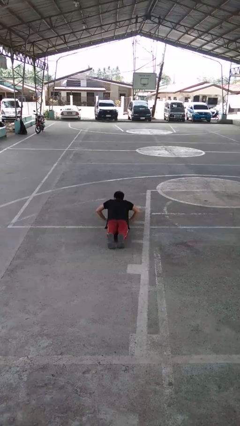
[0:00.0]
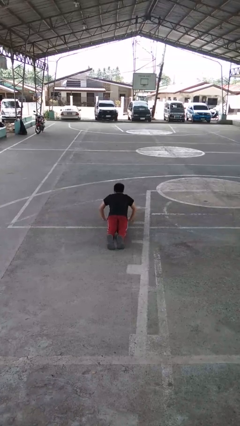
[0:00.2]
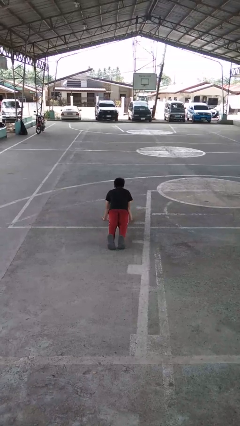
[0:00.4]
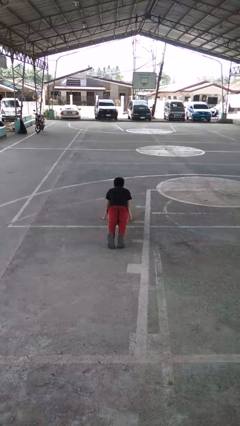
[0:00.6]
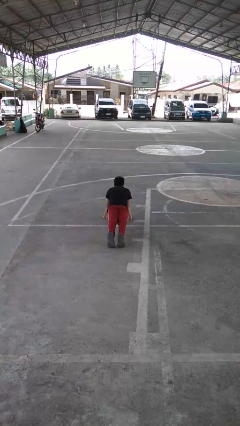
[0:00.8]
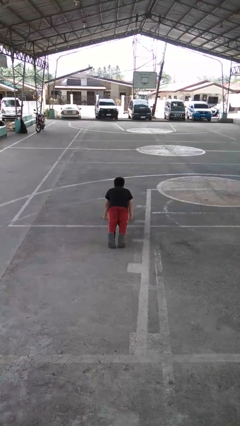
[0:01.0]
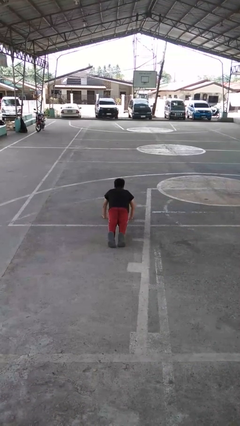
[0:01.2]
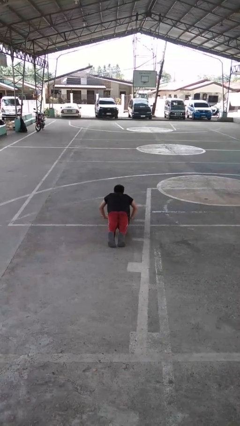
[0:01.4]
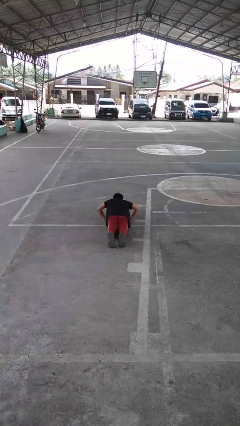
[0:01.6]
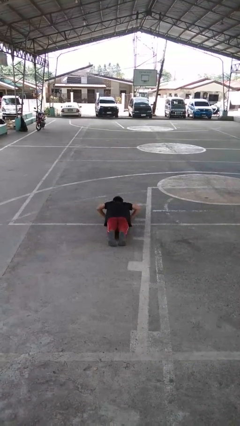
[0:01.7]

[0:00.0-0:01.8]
person exercises with pushup

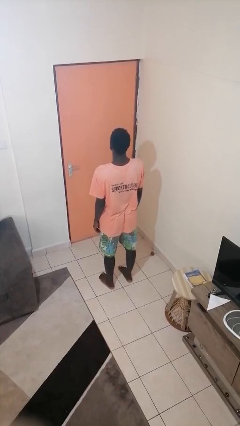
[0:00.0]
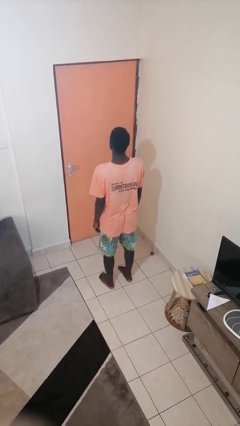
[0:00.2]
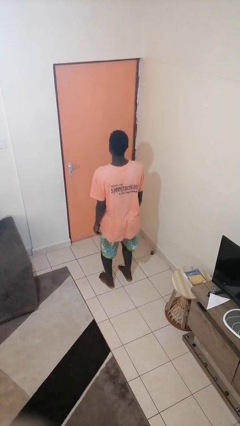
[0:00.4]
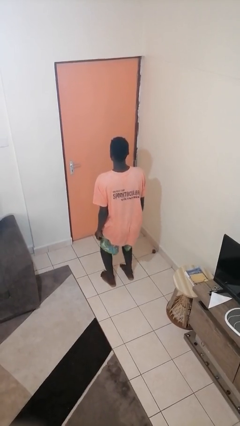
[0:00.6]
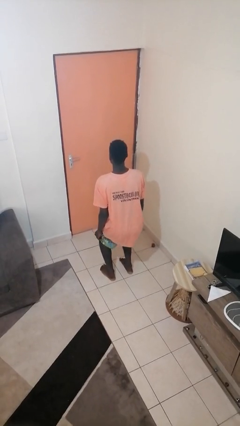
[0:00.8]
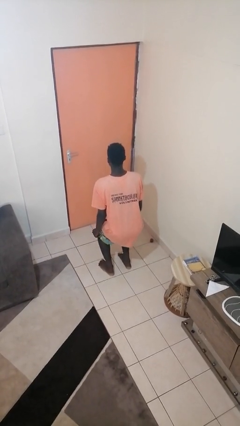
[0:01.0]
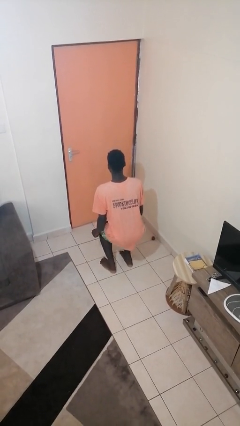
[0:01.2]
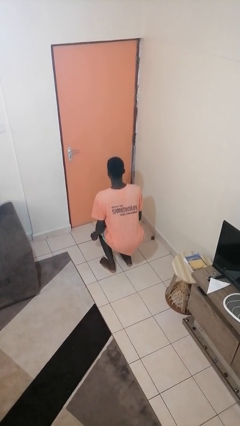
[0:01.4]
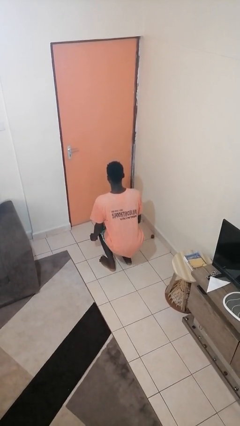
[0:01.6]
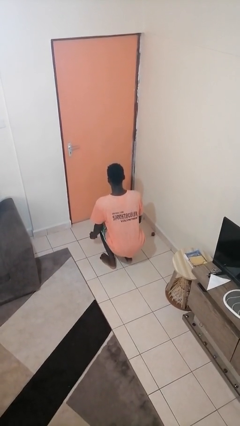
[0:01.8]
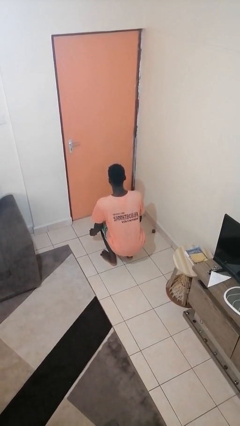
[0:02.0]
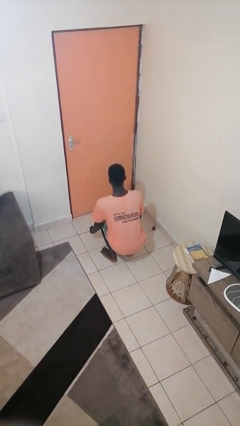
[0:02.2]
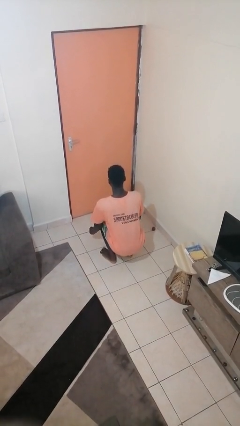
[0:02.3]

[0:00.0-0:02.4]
person squats

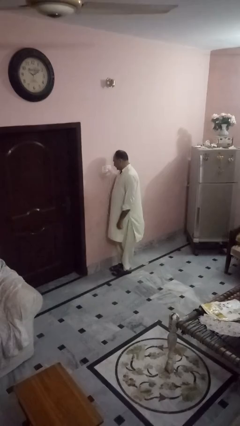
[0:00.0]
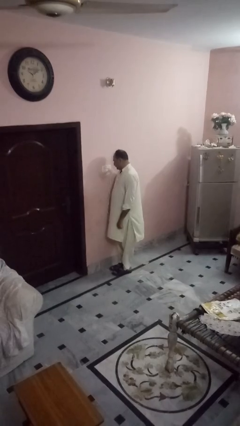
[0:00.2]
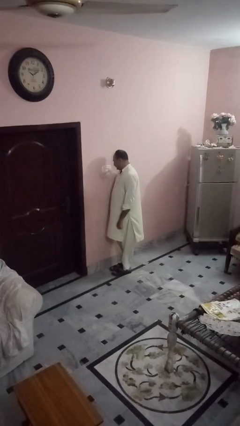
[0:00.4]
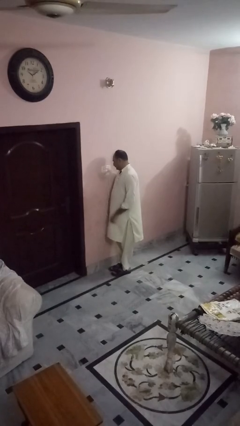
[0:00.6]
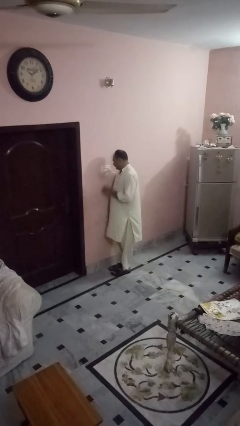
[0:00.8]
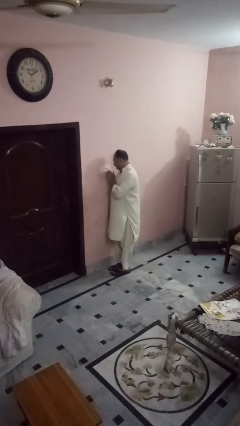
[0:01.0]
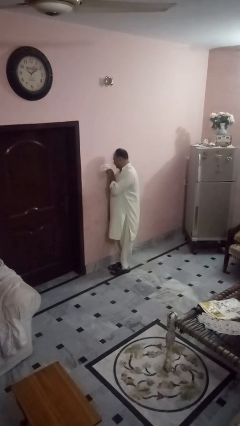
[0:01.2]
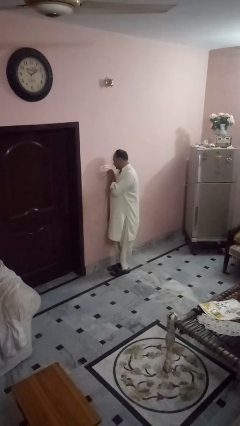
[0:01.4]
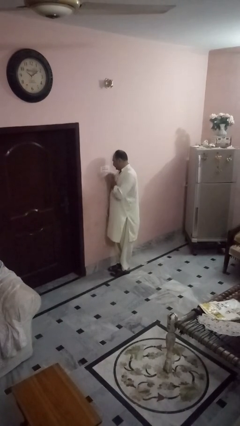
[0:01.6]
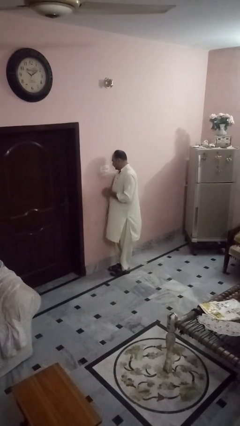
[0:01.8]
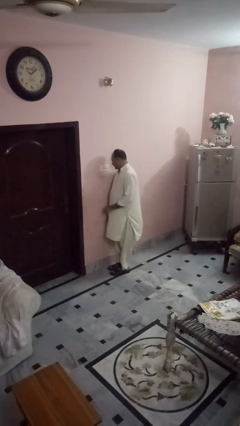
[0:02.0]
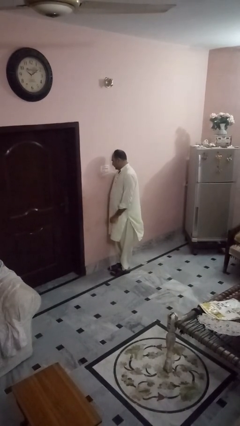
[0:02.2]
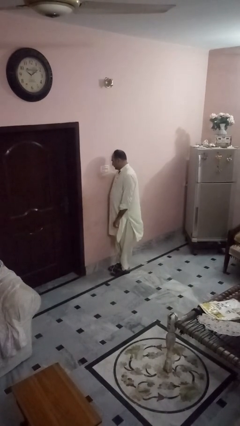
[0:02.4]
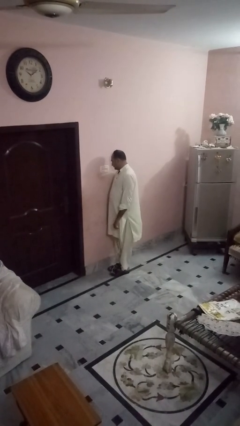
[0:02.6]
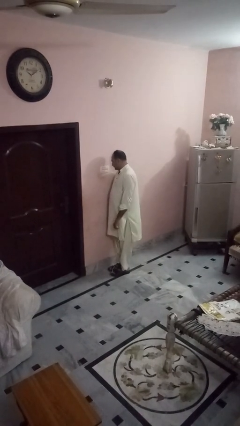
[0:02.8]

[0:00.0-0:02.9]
person unplugs from electrical socket

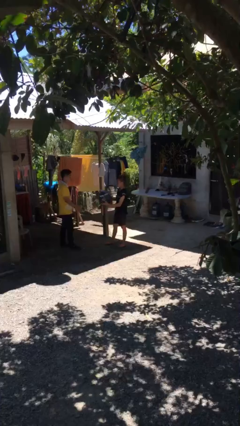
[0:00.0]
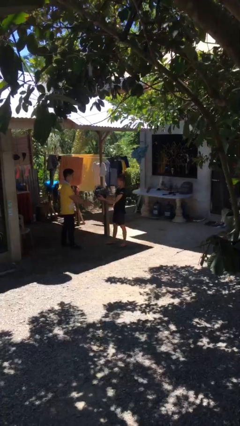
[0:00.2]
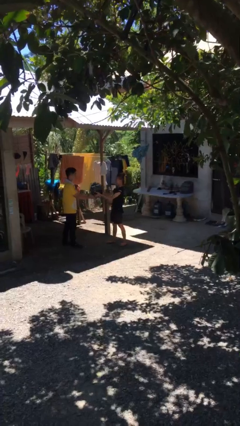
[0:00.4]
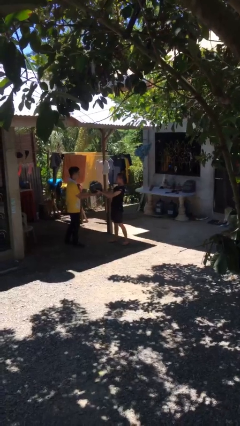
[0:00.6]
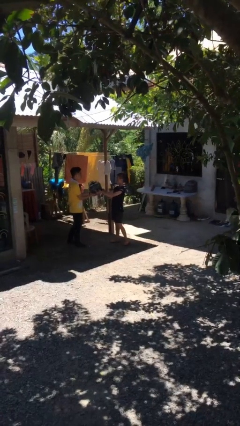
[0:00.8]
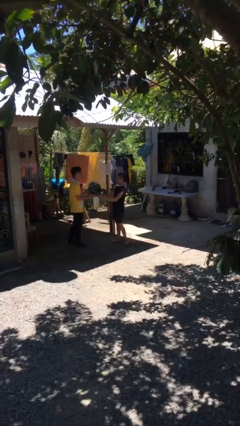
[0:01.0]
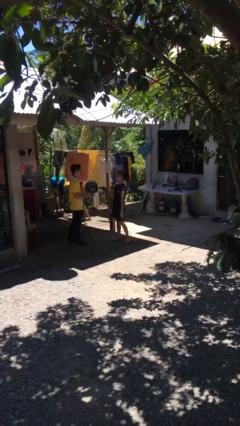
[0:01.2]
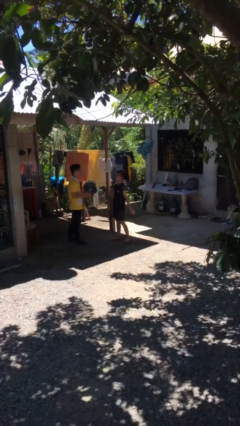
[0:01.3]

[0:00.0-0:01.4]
person transfers object to person

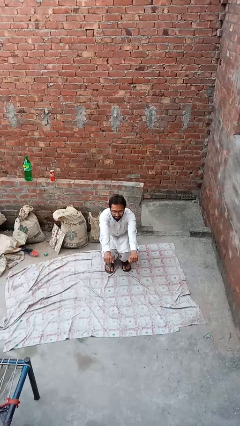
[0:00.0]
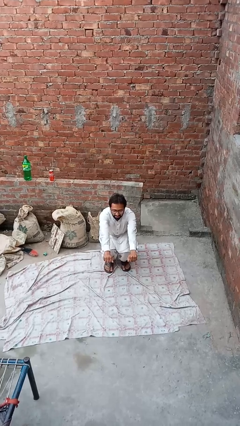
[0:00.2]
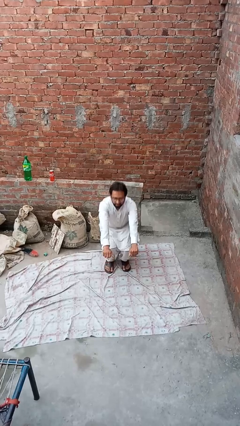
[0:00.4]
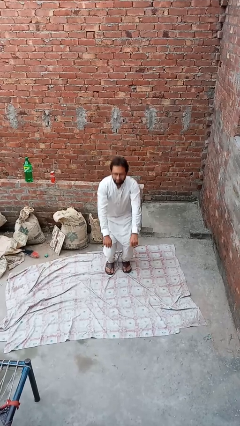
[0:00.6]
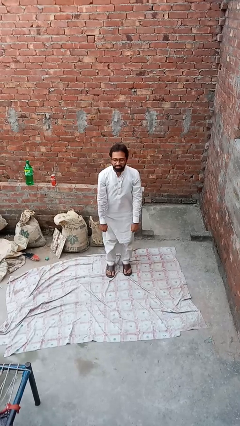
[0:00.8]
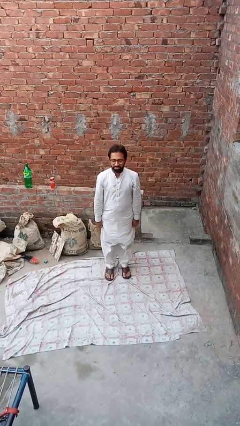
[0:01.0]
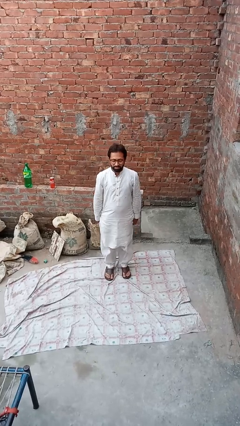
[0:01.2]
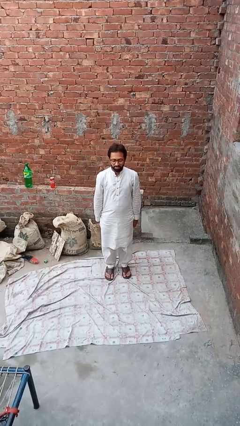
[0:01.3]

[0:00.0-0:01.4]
person stands up

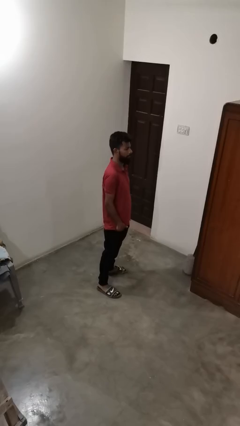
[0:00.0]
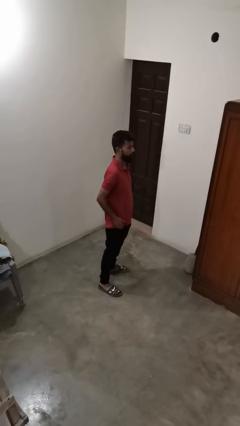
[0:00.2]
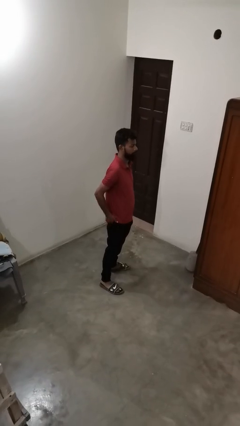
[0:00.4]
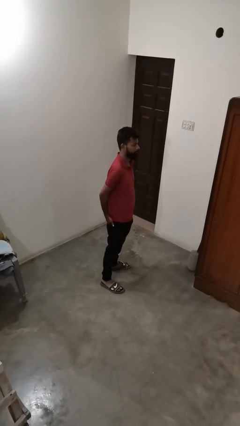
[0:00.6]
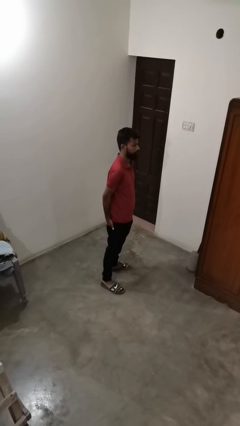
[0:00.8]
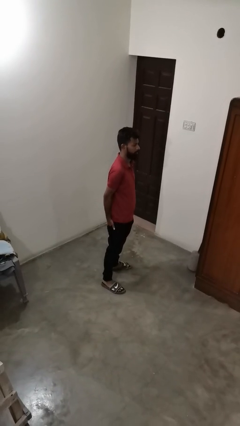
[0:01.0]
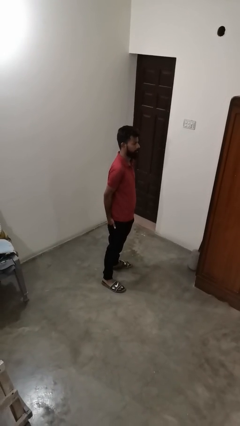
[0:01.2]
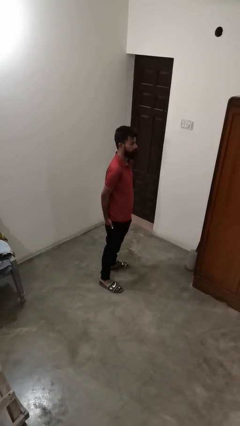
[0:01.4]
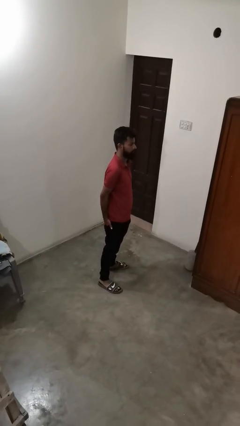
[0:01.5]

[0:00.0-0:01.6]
person puts hands in back pockets

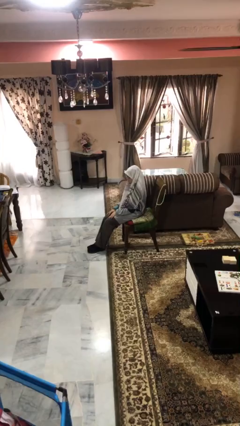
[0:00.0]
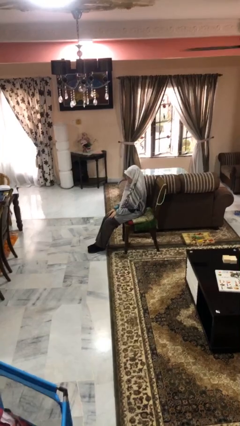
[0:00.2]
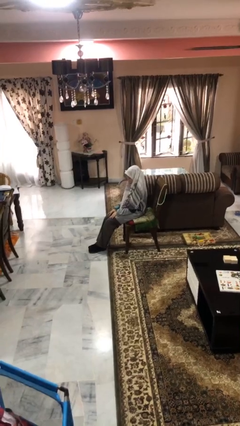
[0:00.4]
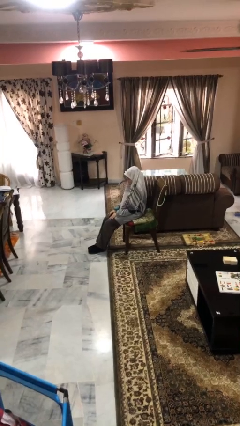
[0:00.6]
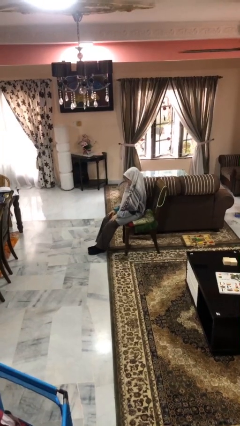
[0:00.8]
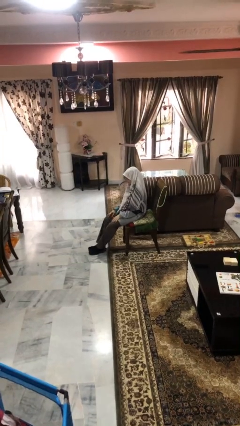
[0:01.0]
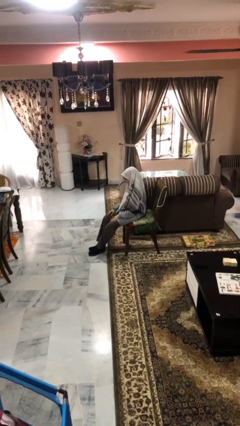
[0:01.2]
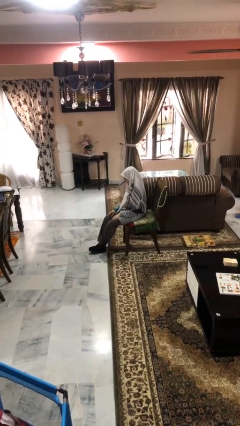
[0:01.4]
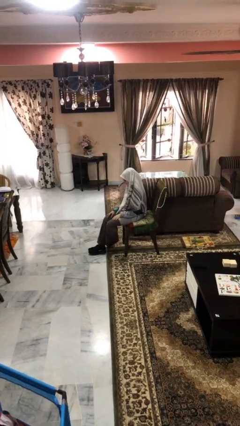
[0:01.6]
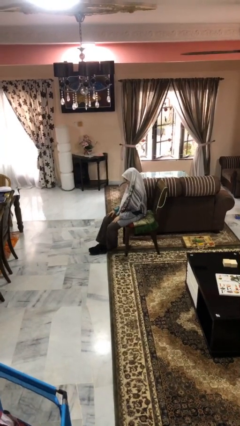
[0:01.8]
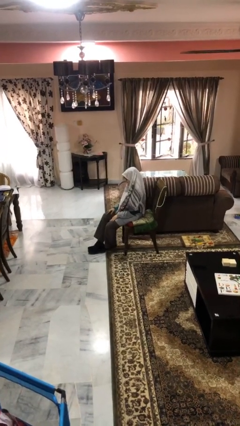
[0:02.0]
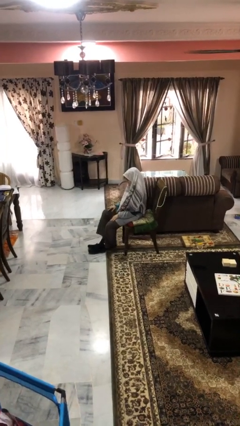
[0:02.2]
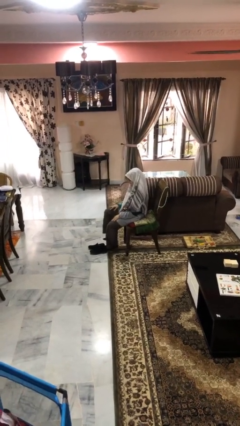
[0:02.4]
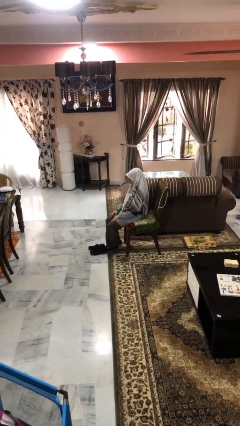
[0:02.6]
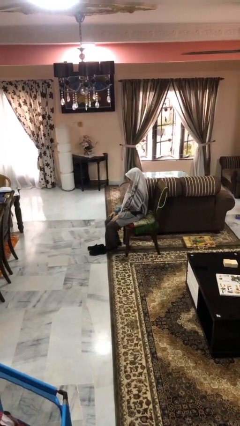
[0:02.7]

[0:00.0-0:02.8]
person takes off shoes

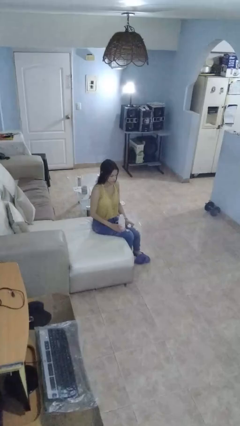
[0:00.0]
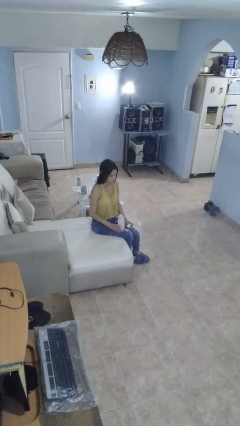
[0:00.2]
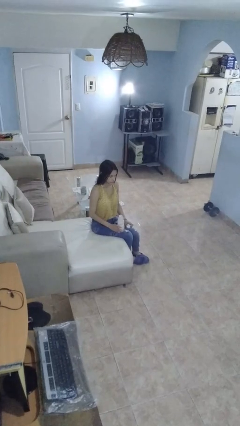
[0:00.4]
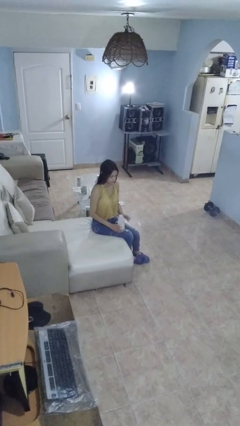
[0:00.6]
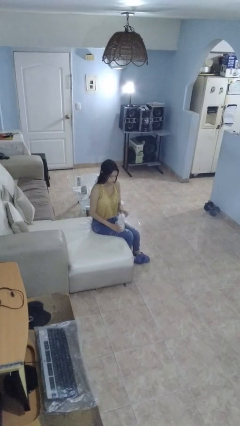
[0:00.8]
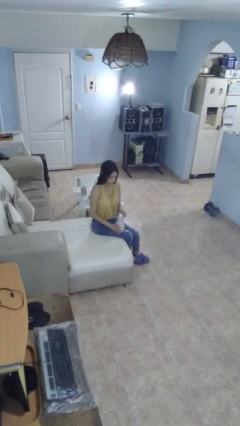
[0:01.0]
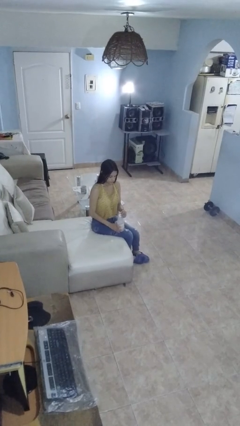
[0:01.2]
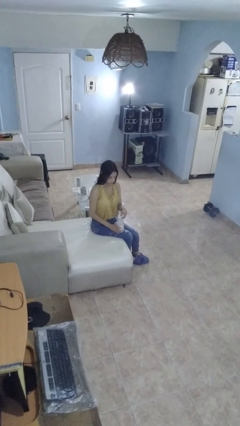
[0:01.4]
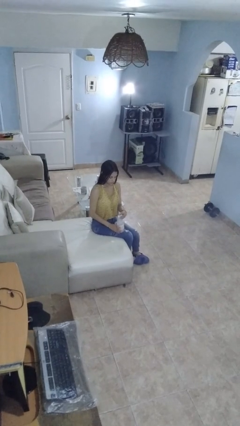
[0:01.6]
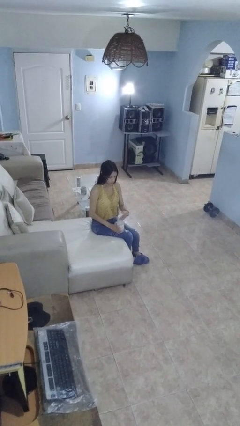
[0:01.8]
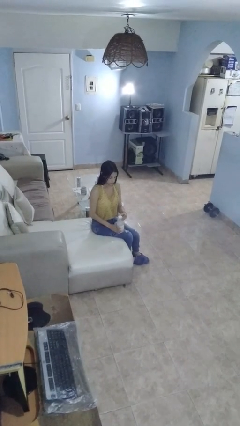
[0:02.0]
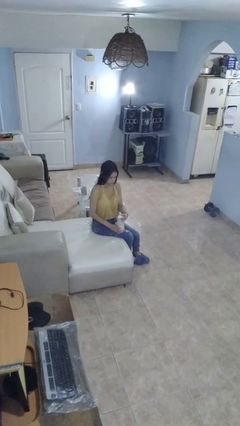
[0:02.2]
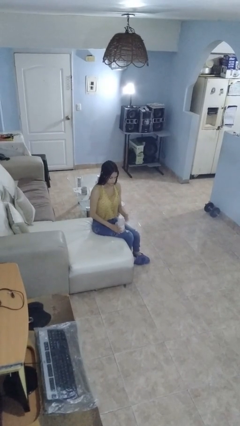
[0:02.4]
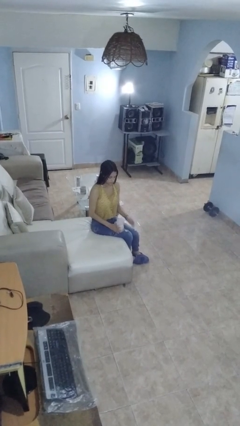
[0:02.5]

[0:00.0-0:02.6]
person screws lid to bottle
